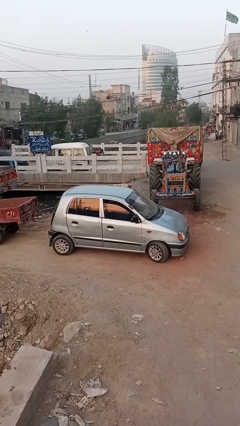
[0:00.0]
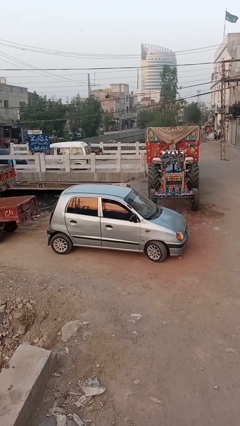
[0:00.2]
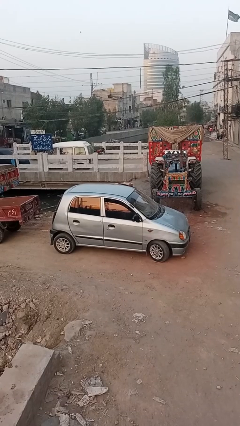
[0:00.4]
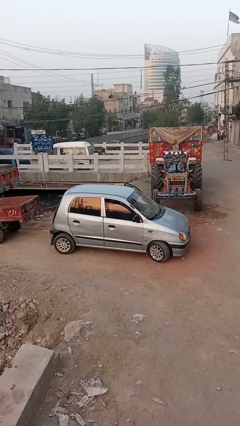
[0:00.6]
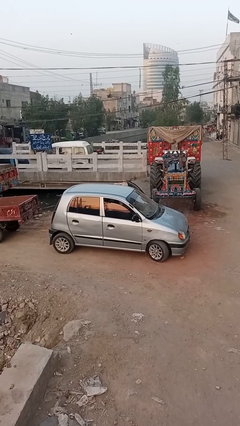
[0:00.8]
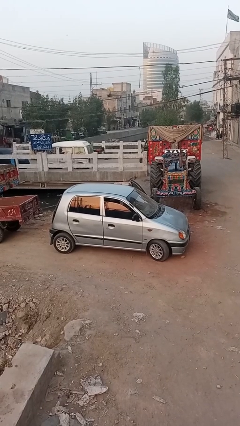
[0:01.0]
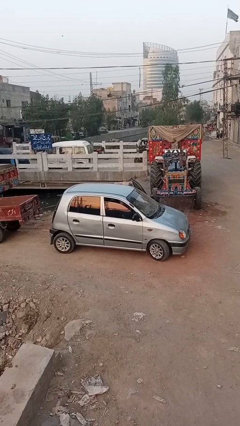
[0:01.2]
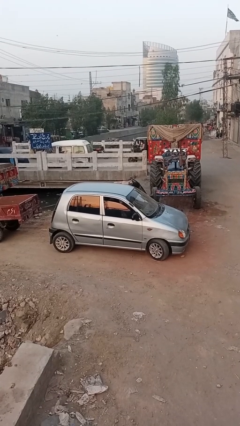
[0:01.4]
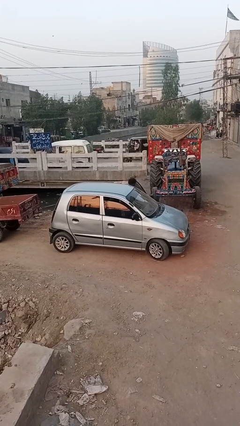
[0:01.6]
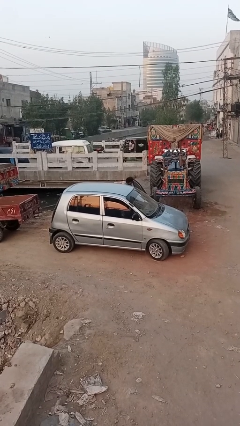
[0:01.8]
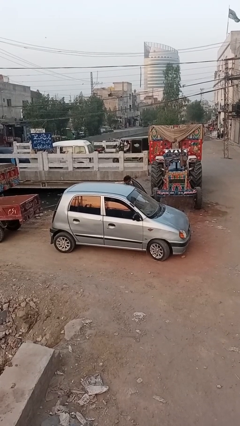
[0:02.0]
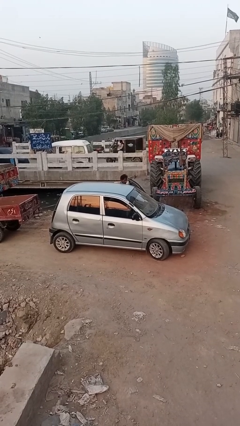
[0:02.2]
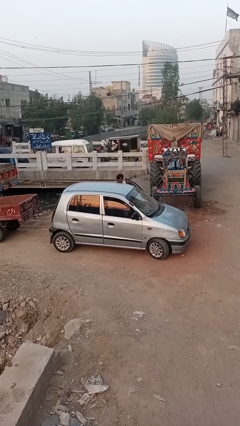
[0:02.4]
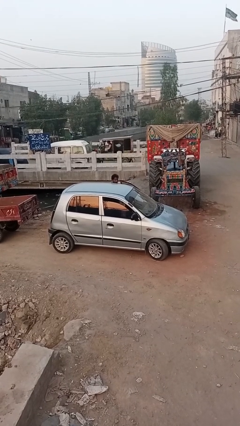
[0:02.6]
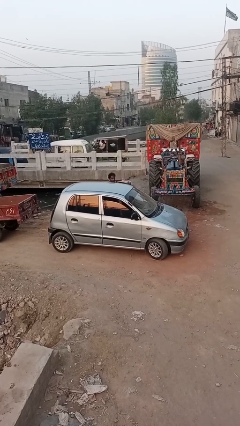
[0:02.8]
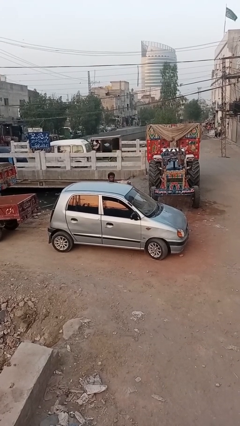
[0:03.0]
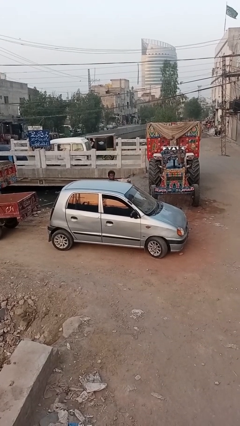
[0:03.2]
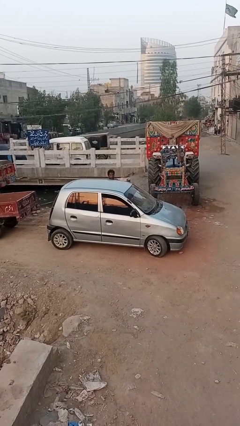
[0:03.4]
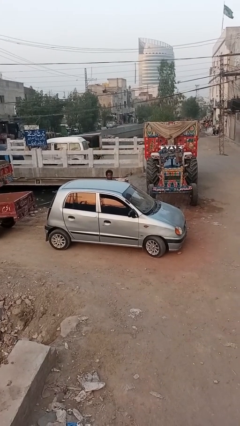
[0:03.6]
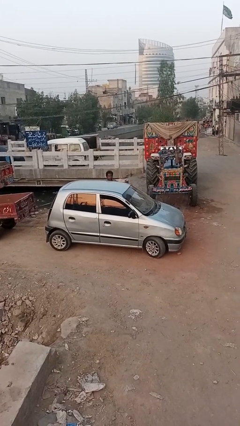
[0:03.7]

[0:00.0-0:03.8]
car drops off person

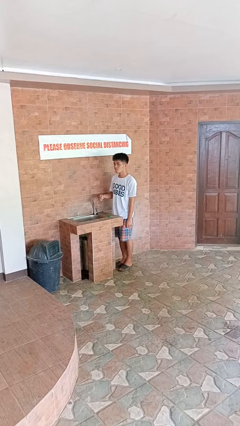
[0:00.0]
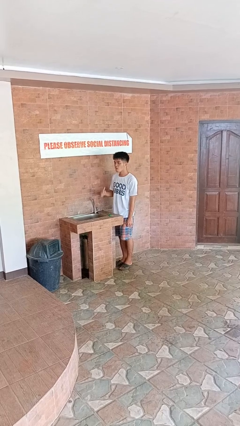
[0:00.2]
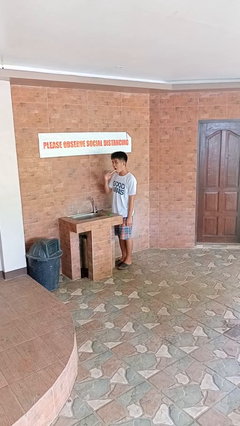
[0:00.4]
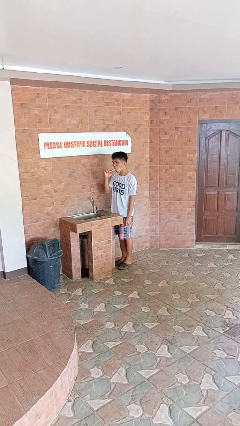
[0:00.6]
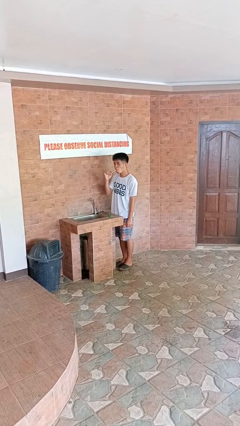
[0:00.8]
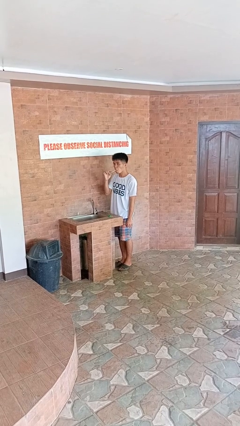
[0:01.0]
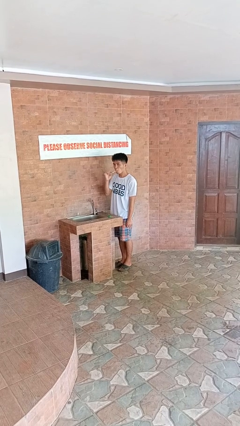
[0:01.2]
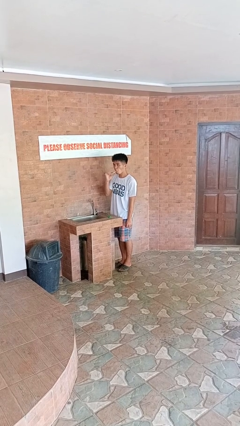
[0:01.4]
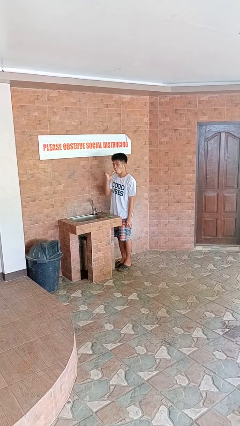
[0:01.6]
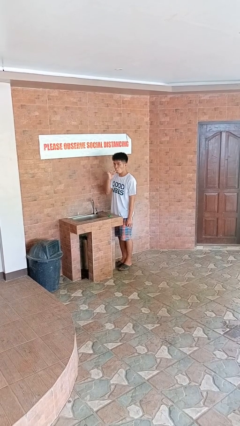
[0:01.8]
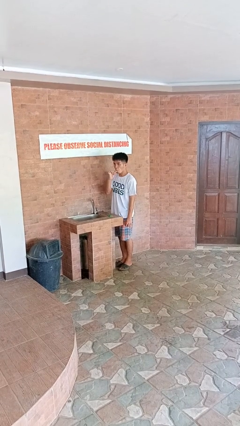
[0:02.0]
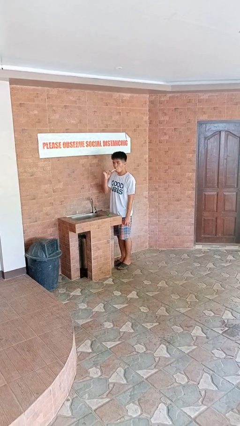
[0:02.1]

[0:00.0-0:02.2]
person brushes teeth

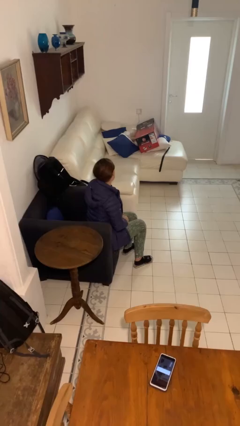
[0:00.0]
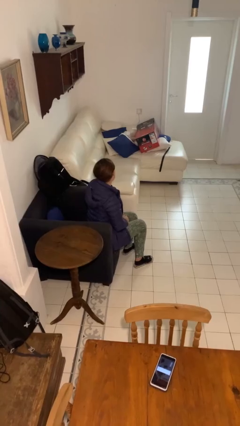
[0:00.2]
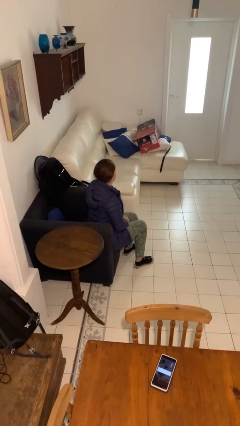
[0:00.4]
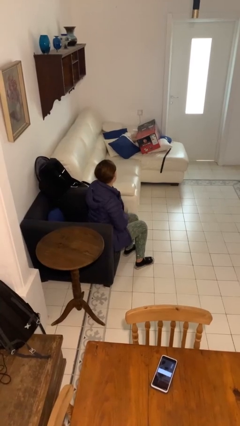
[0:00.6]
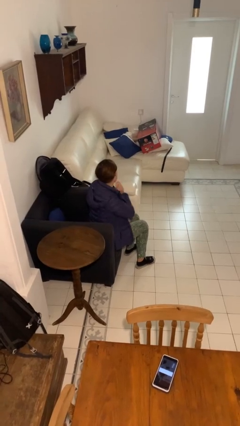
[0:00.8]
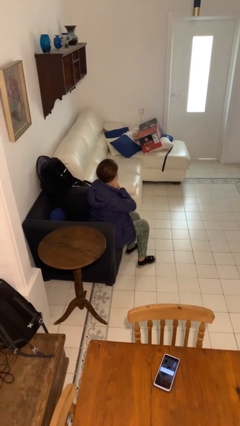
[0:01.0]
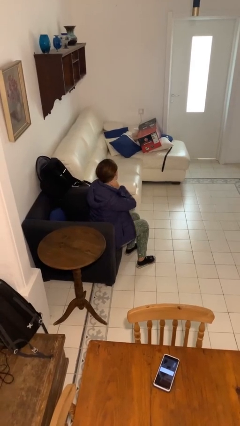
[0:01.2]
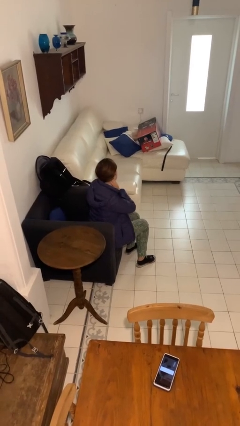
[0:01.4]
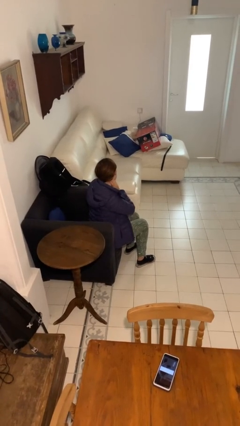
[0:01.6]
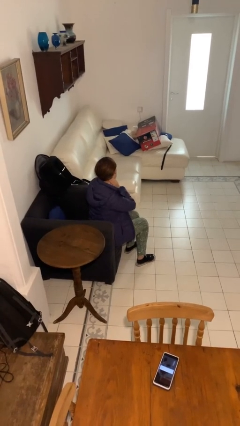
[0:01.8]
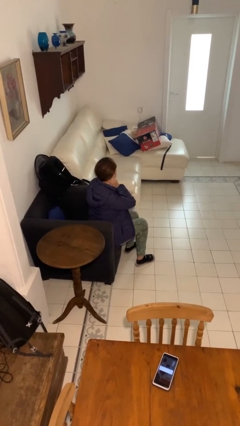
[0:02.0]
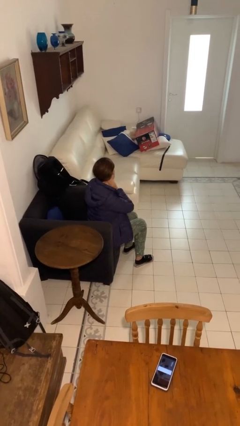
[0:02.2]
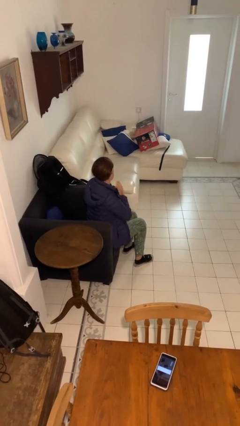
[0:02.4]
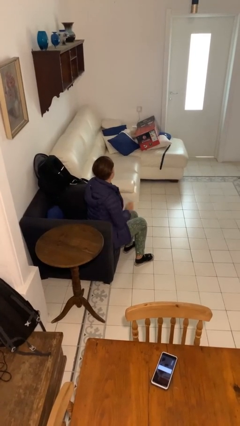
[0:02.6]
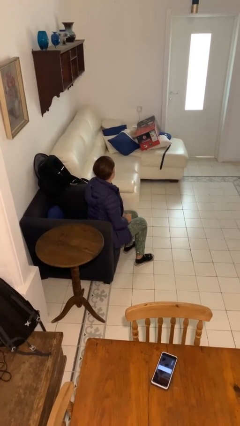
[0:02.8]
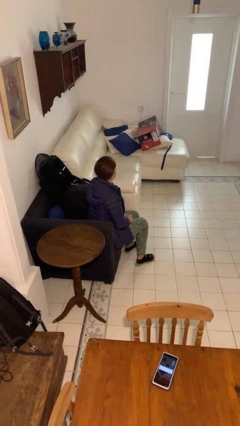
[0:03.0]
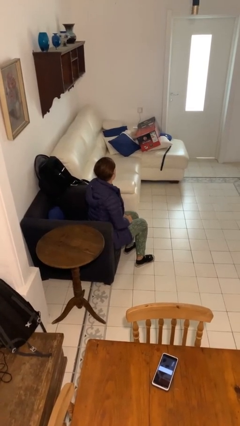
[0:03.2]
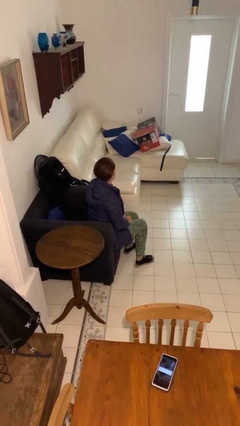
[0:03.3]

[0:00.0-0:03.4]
person rubs neck

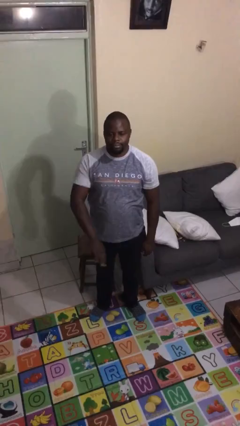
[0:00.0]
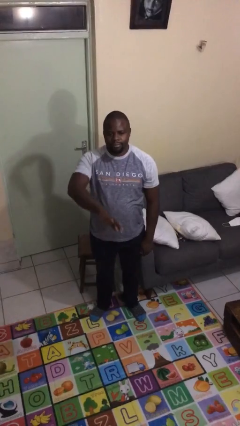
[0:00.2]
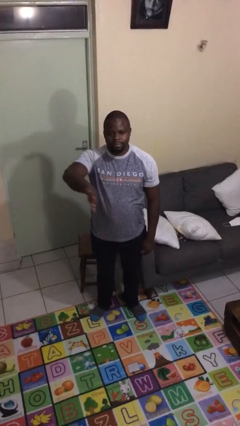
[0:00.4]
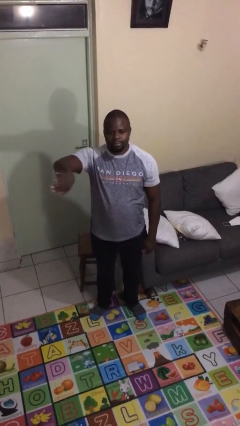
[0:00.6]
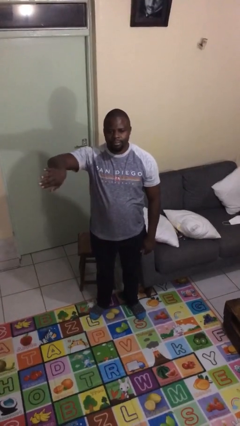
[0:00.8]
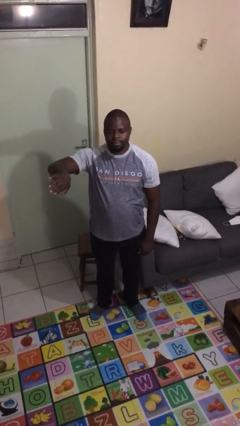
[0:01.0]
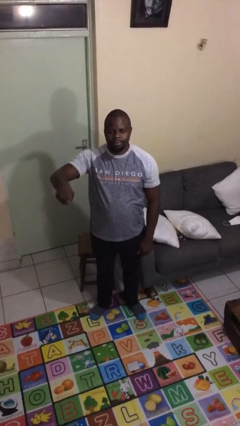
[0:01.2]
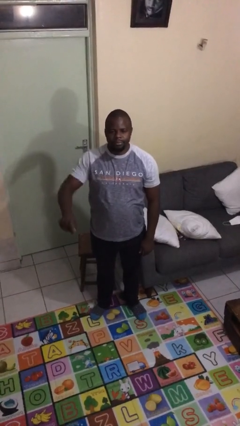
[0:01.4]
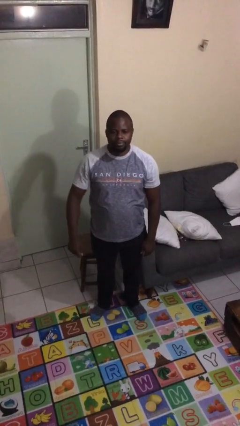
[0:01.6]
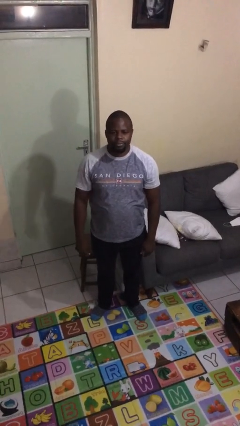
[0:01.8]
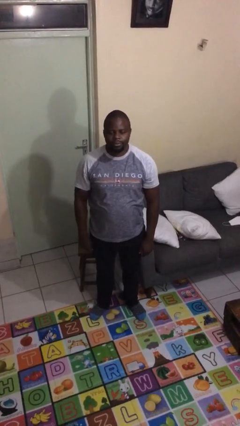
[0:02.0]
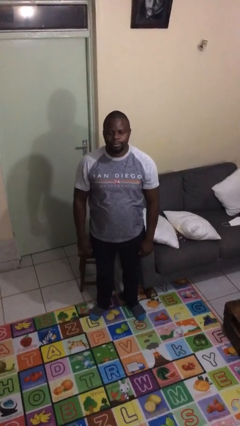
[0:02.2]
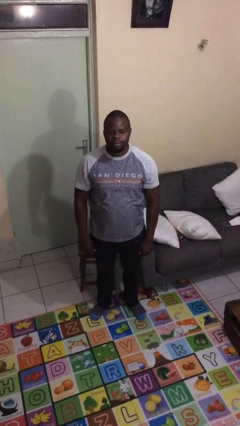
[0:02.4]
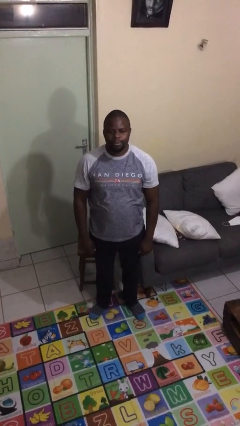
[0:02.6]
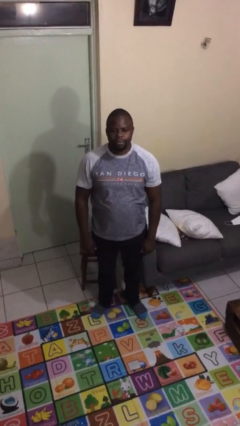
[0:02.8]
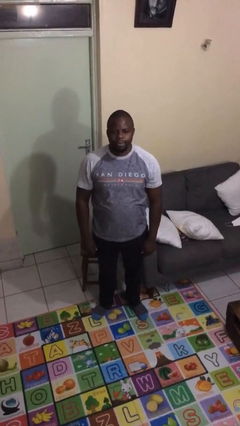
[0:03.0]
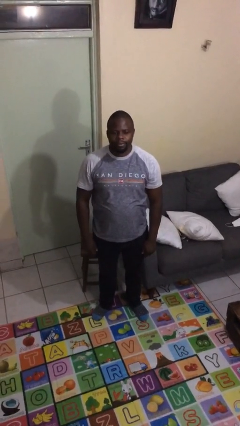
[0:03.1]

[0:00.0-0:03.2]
person gestures swipe right

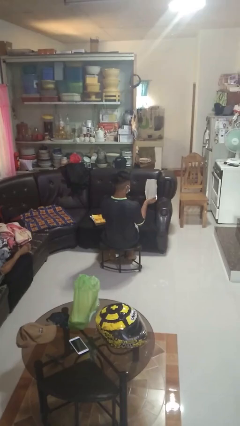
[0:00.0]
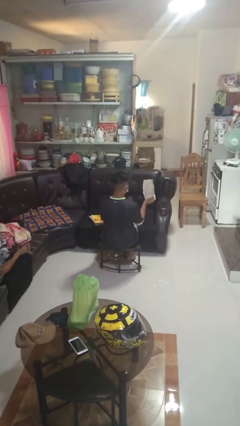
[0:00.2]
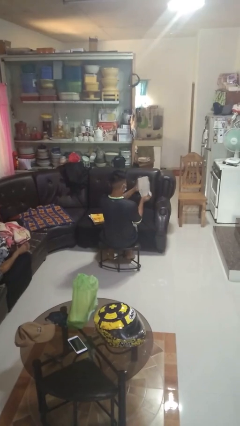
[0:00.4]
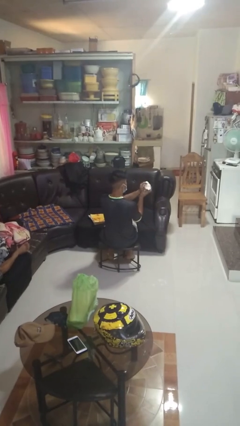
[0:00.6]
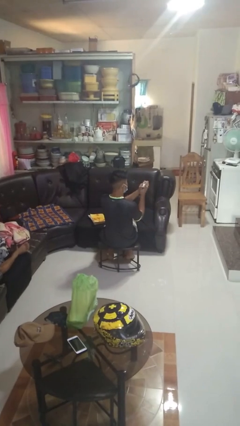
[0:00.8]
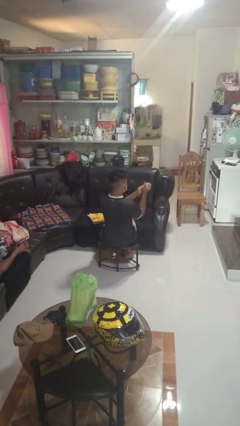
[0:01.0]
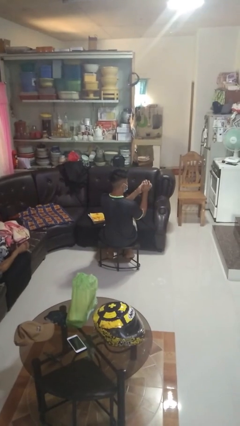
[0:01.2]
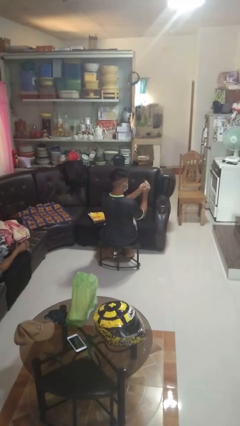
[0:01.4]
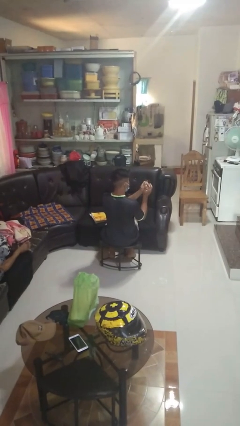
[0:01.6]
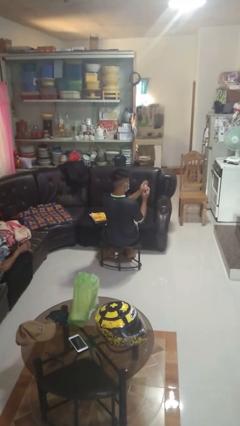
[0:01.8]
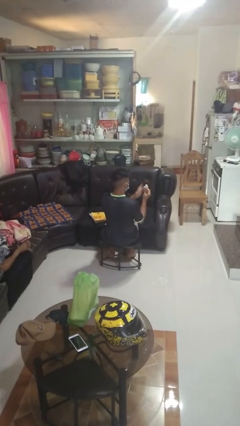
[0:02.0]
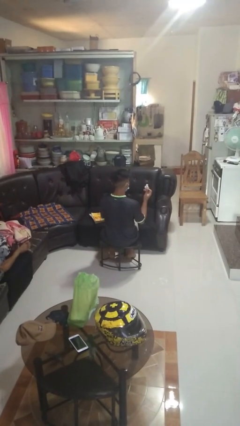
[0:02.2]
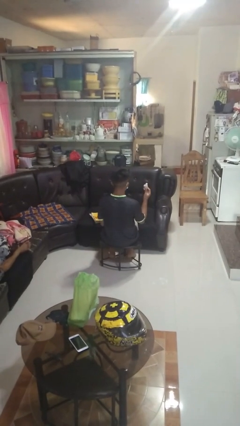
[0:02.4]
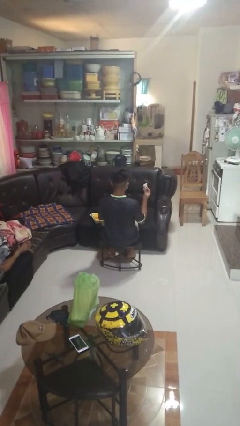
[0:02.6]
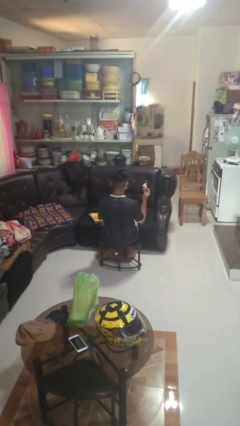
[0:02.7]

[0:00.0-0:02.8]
person crumples paper

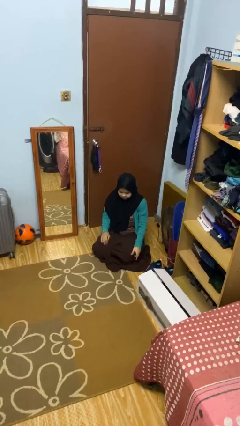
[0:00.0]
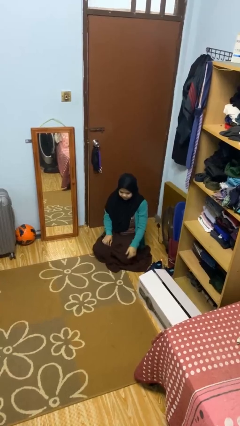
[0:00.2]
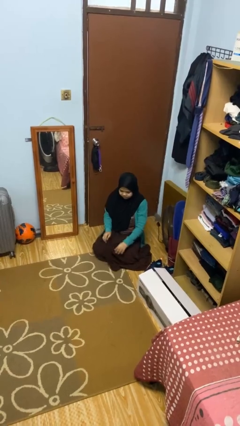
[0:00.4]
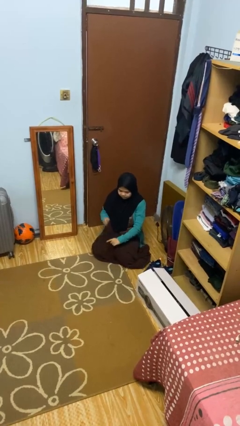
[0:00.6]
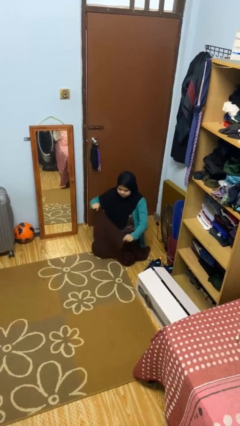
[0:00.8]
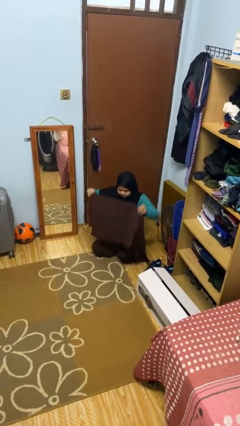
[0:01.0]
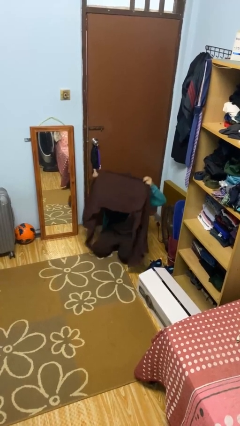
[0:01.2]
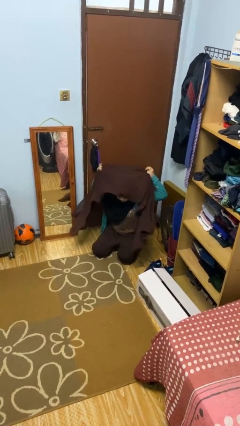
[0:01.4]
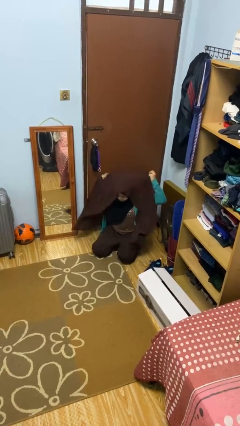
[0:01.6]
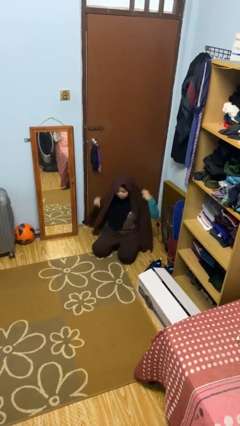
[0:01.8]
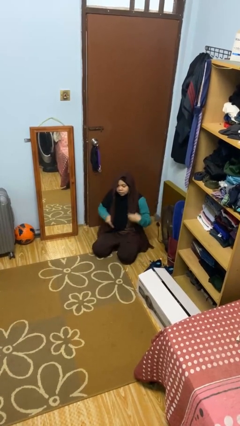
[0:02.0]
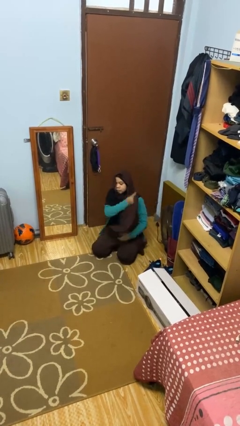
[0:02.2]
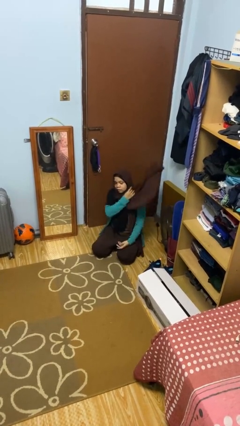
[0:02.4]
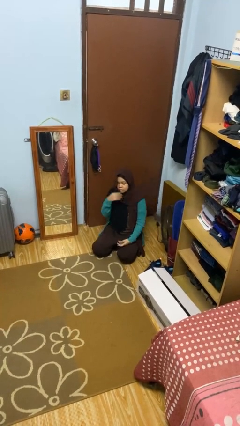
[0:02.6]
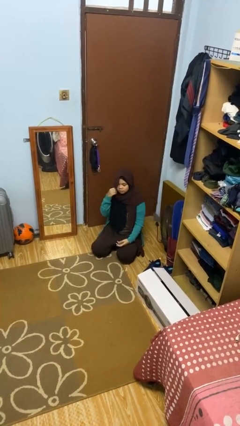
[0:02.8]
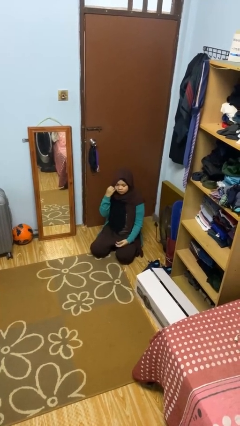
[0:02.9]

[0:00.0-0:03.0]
person puts on scarf
